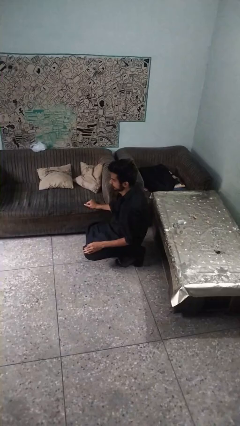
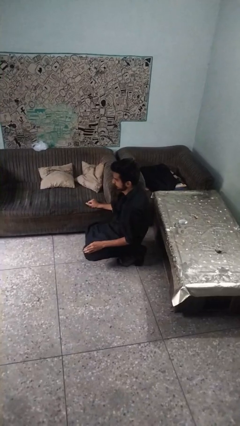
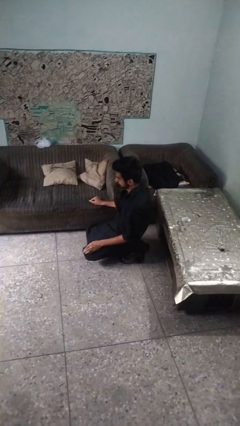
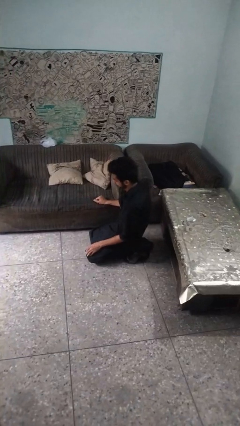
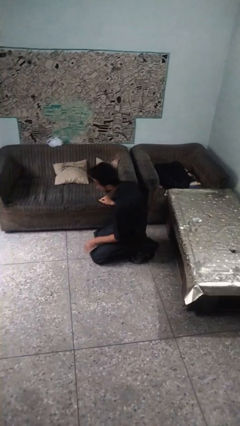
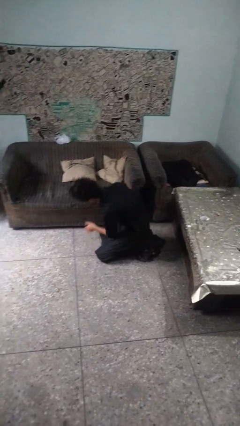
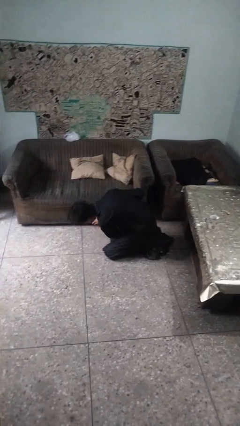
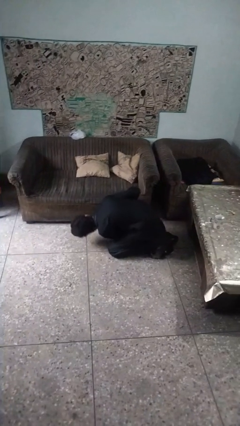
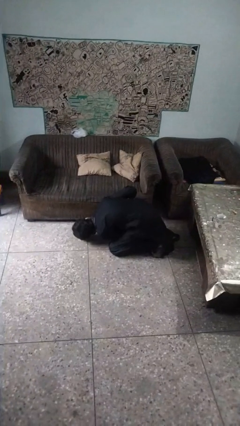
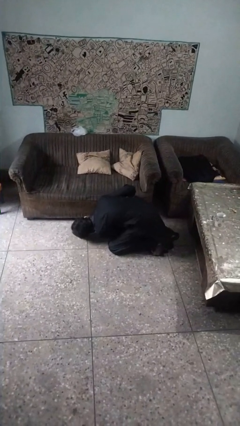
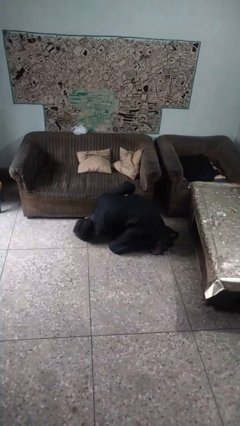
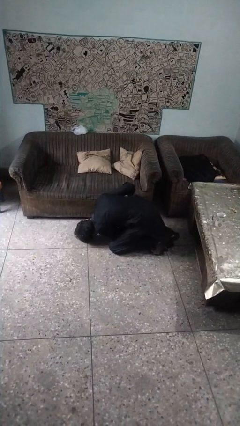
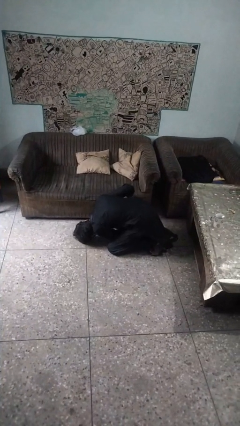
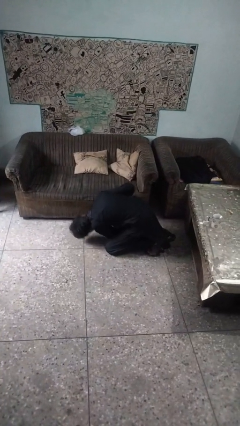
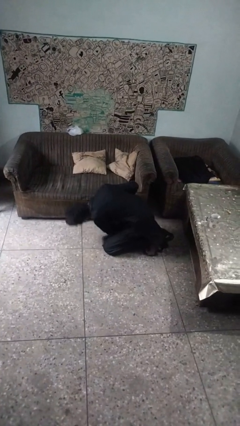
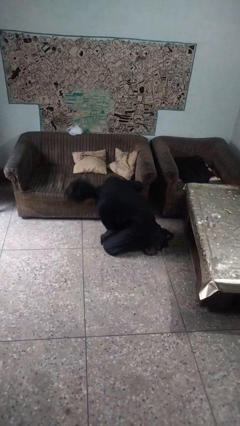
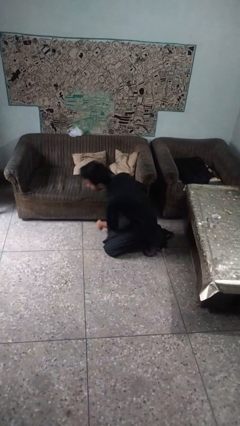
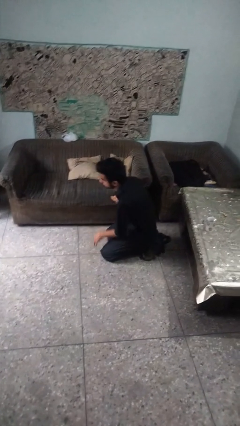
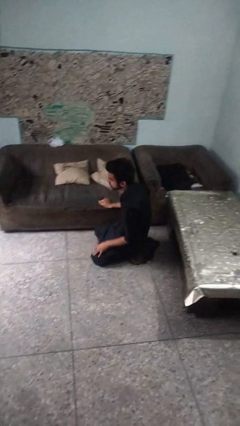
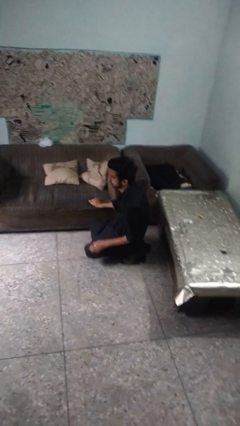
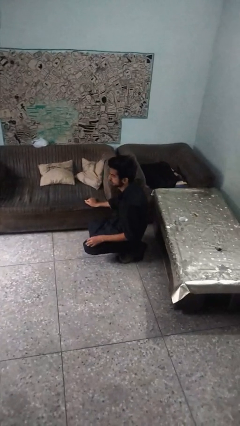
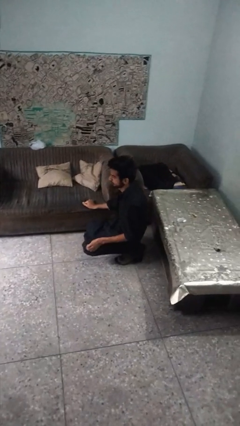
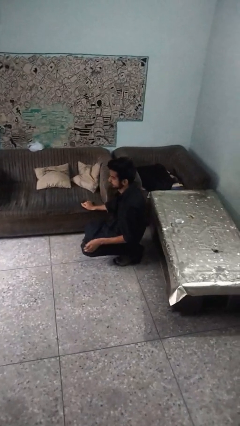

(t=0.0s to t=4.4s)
person searches under couch

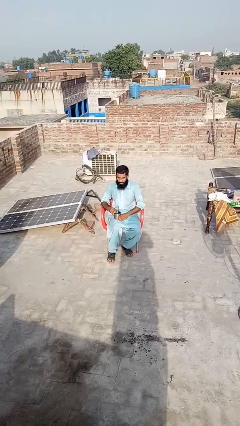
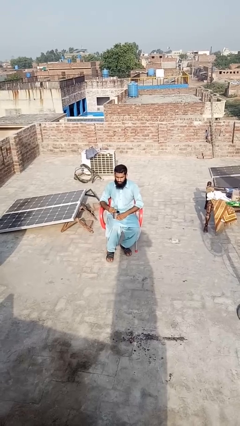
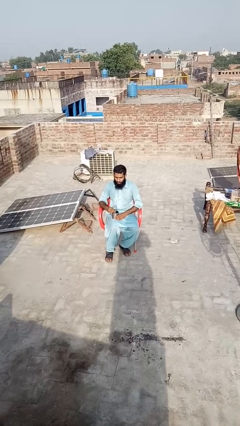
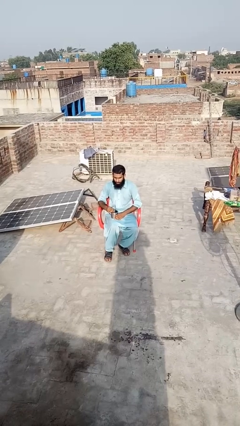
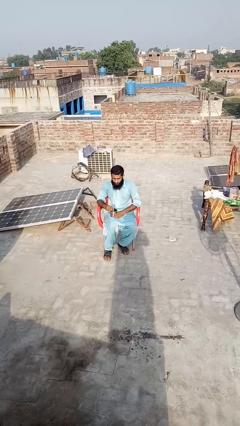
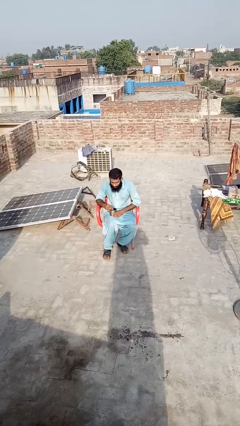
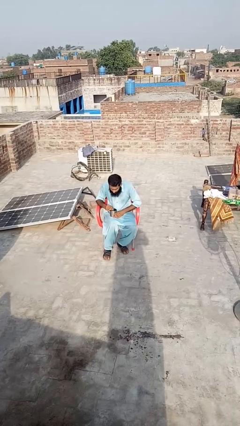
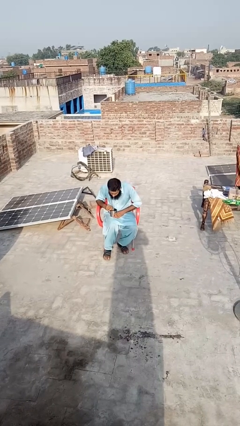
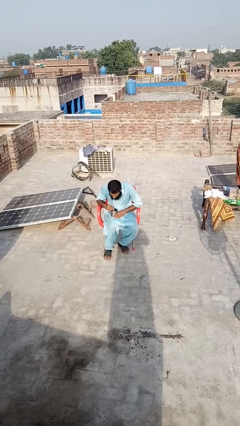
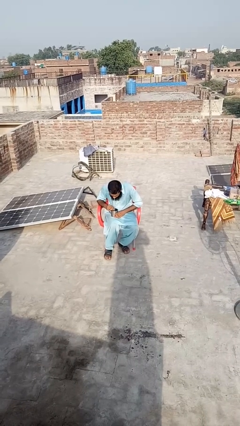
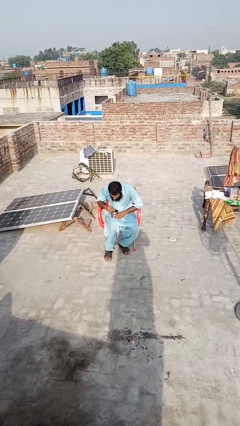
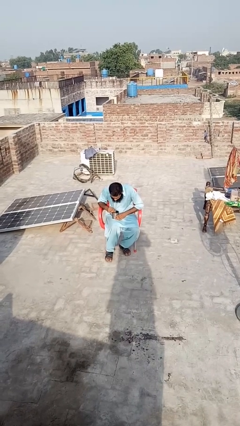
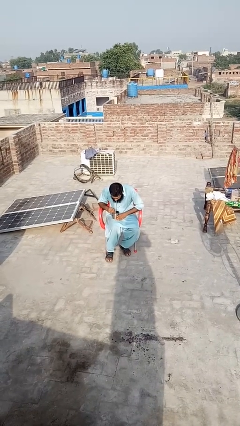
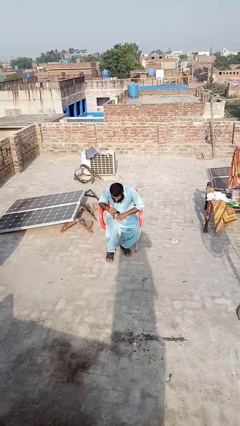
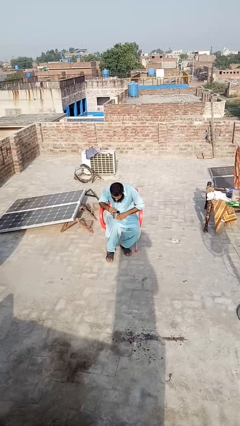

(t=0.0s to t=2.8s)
person drinks from straw

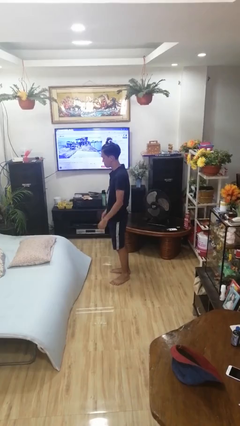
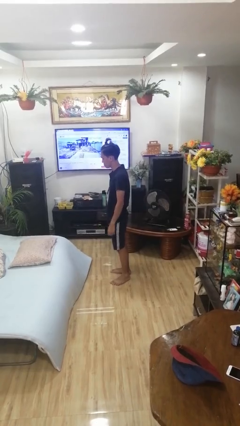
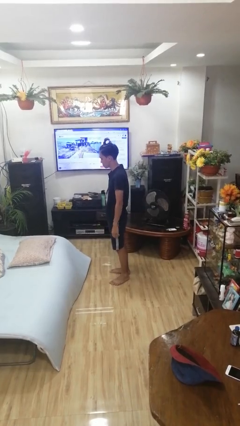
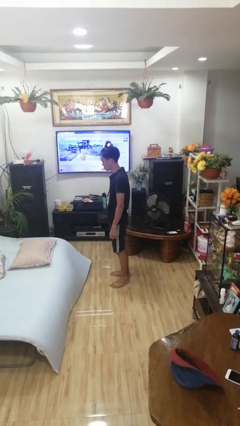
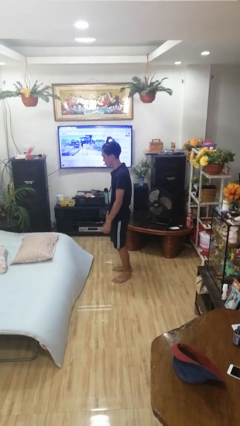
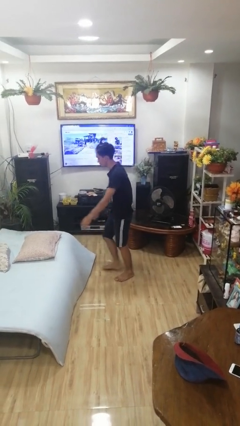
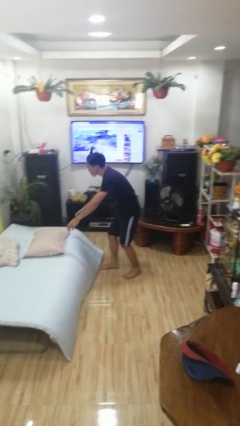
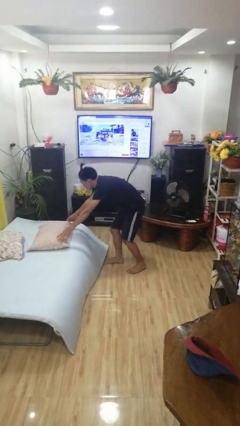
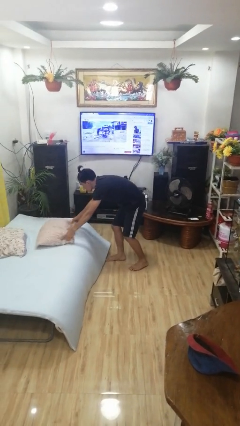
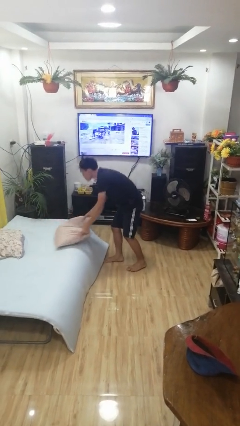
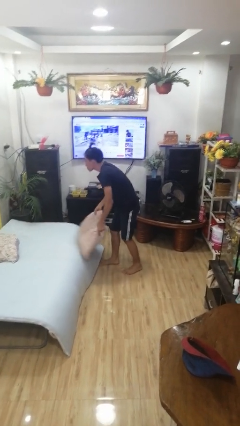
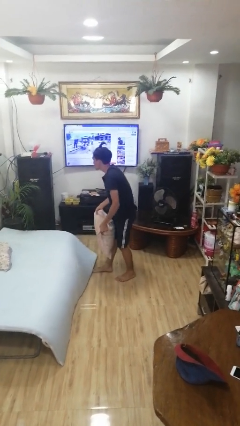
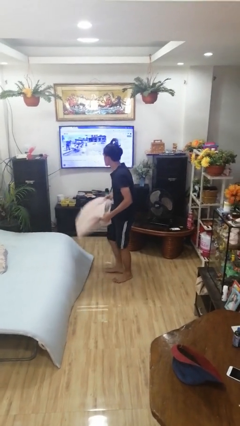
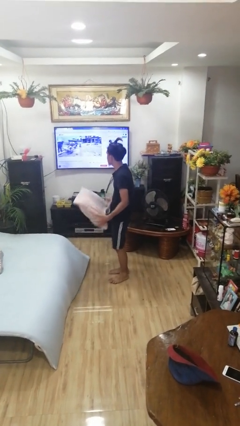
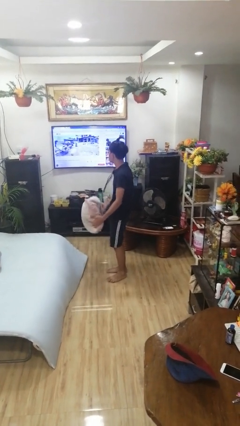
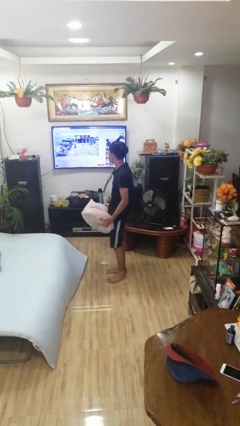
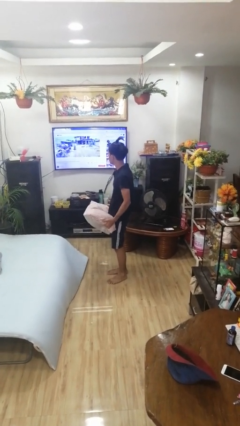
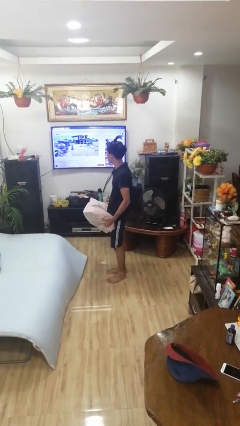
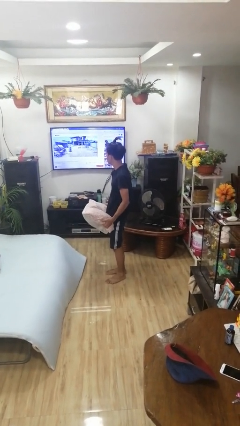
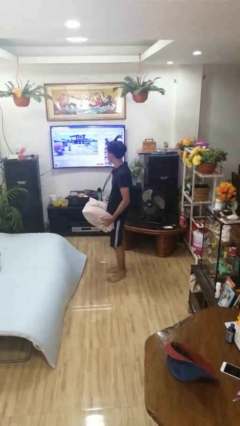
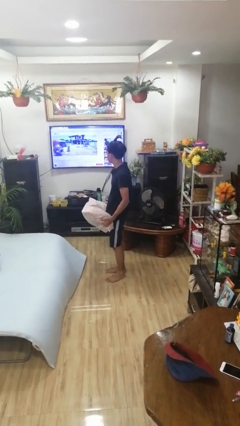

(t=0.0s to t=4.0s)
person picks up object from bed

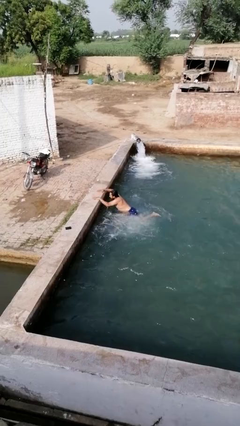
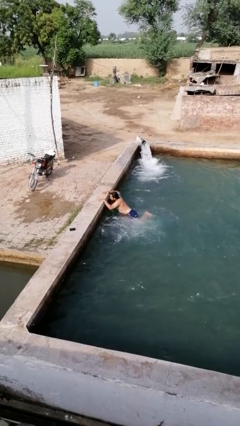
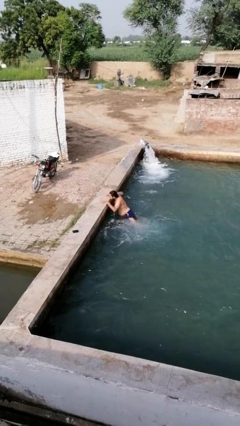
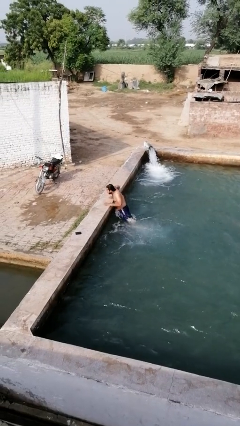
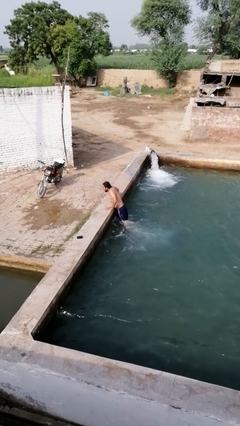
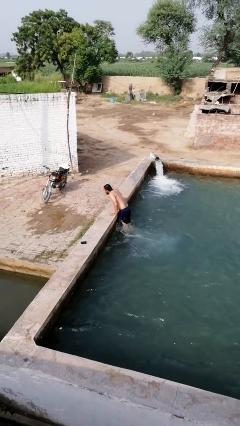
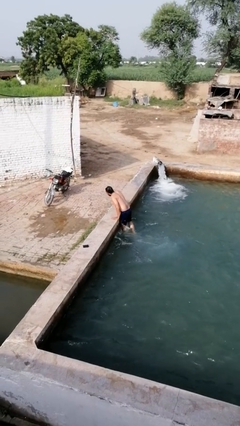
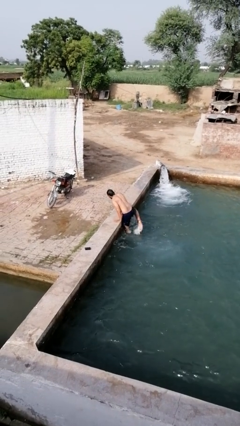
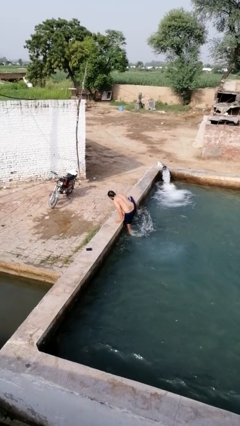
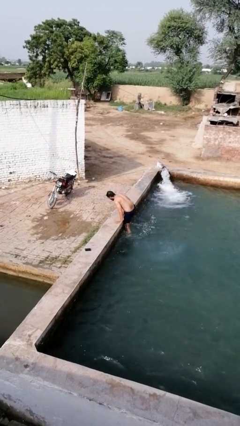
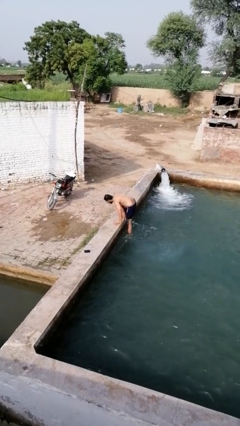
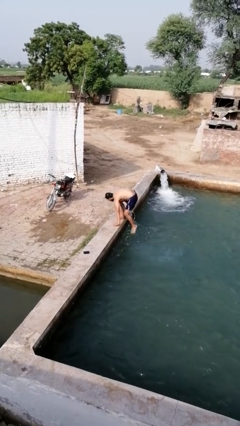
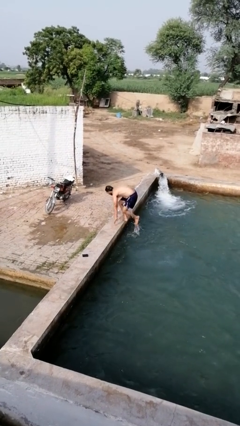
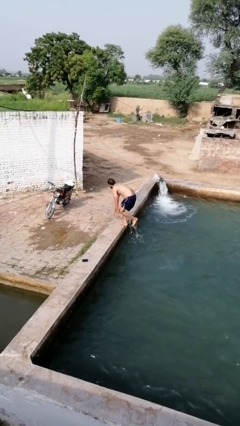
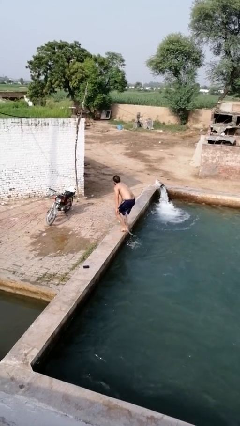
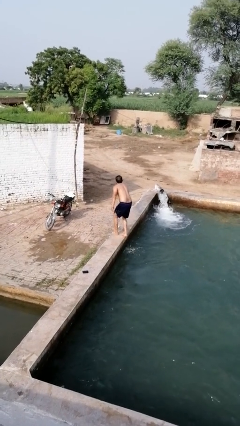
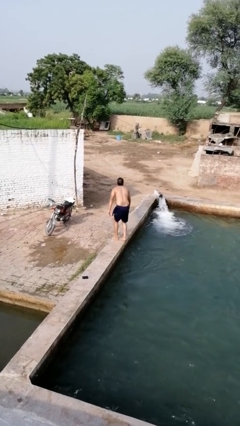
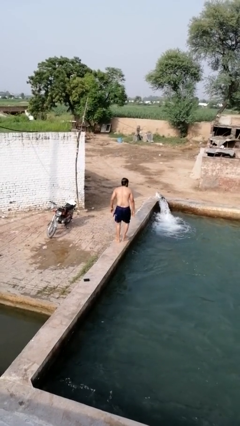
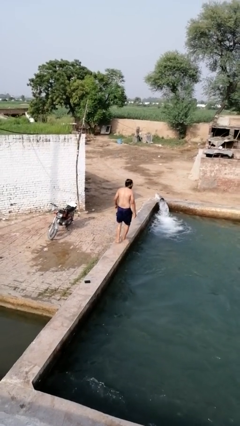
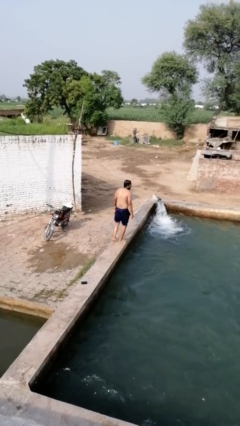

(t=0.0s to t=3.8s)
person exits pool

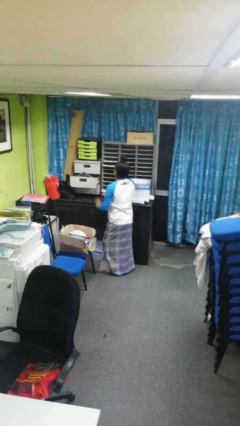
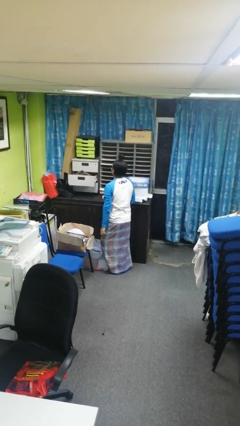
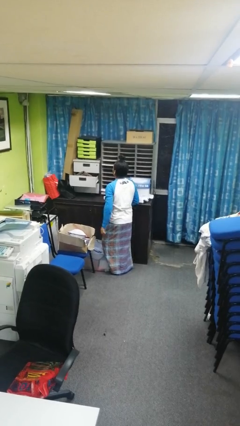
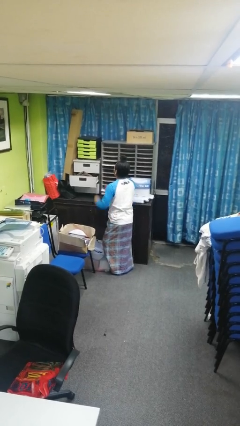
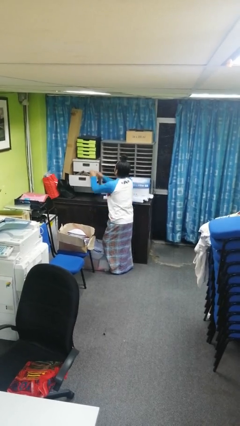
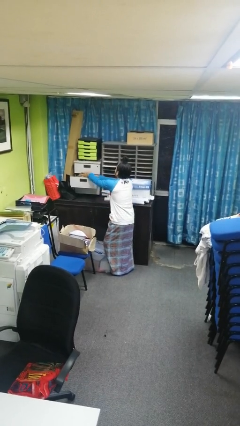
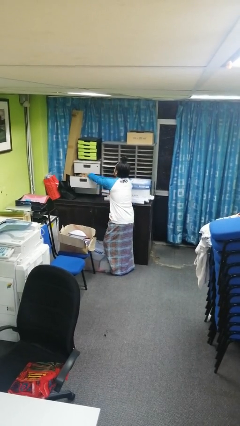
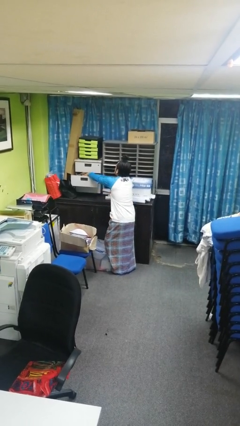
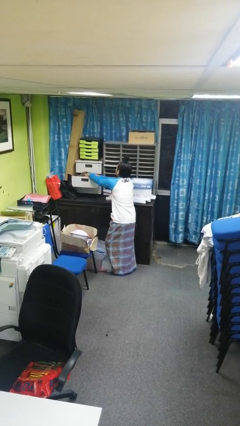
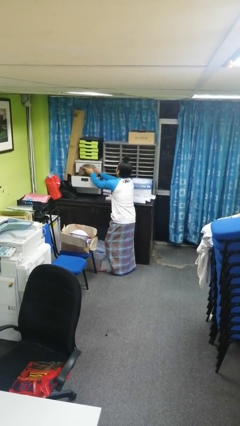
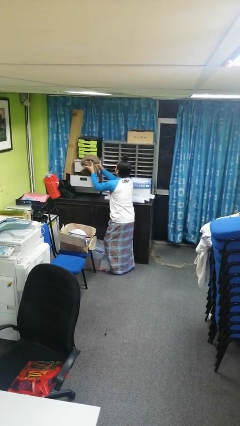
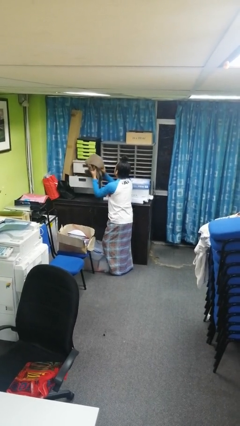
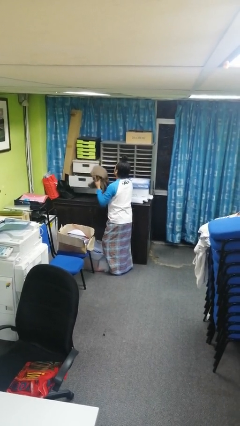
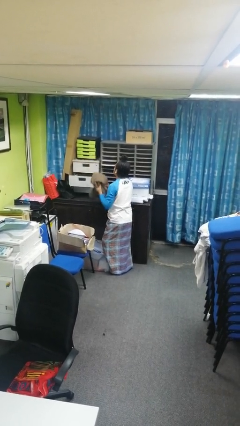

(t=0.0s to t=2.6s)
person takes clothes from dresser
